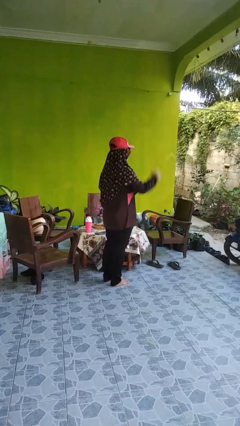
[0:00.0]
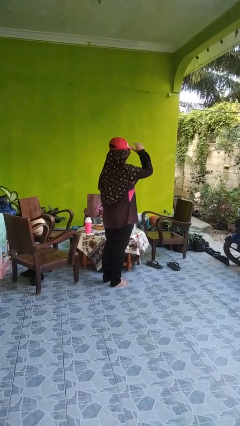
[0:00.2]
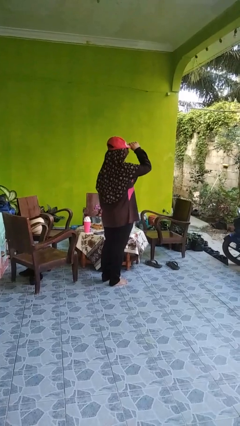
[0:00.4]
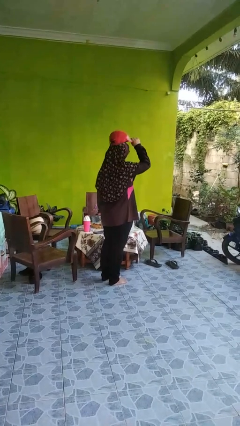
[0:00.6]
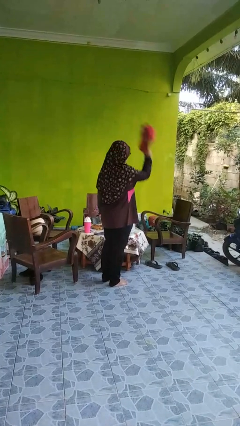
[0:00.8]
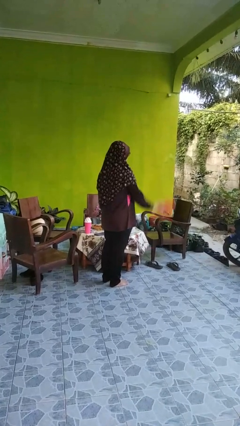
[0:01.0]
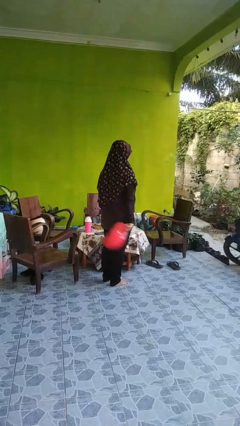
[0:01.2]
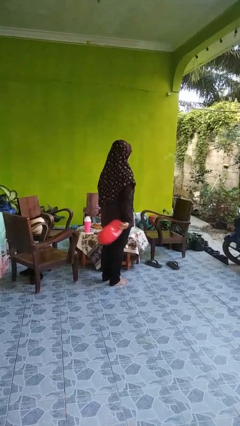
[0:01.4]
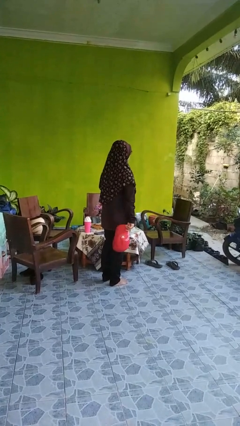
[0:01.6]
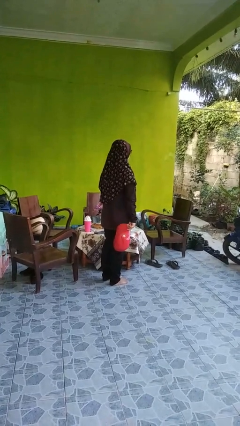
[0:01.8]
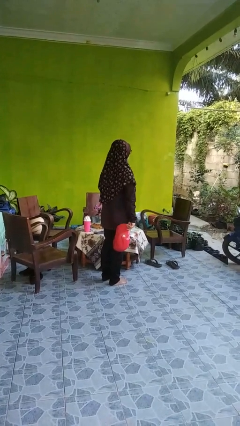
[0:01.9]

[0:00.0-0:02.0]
person takes off hat

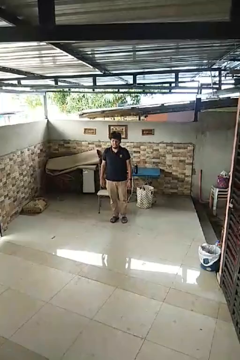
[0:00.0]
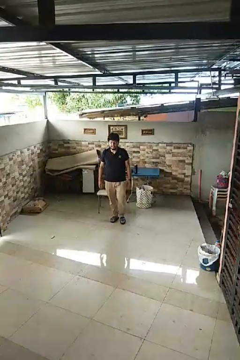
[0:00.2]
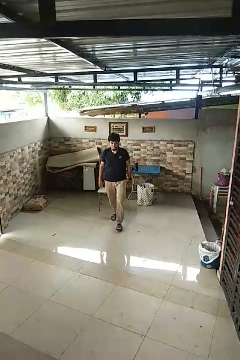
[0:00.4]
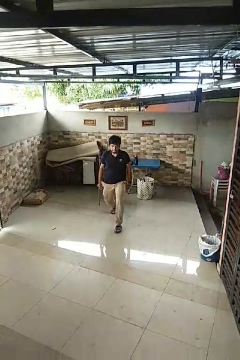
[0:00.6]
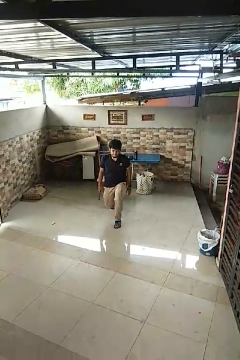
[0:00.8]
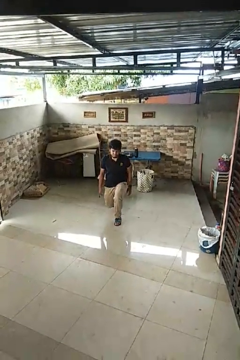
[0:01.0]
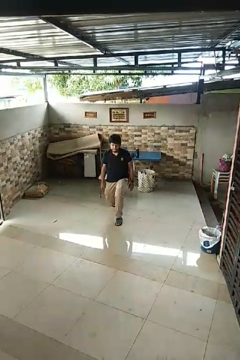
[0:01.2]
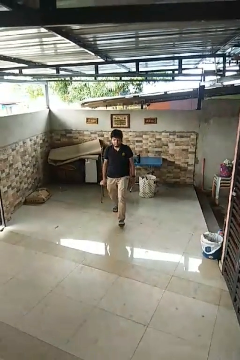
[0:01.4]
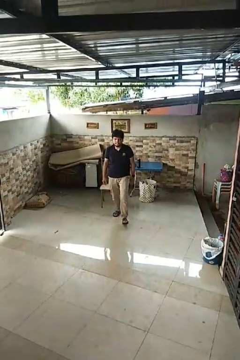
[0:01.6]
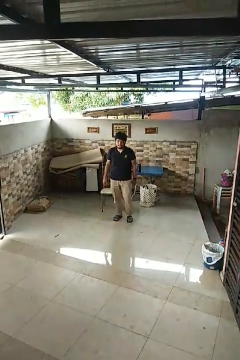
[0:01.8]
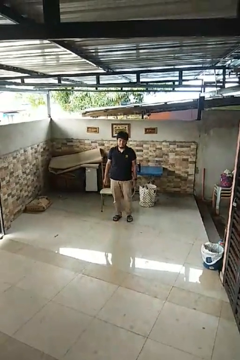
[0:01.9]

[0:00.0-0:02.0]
person exercises with lunges

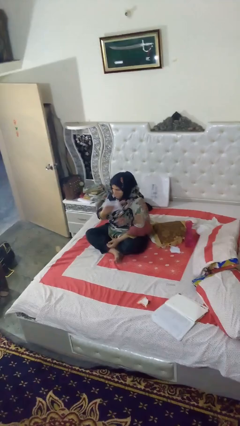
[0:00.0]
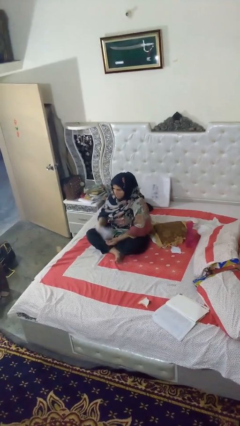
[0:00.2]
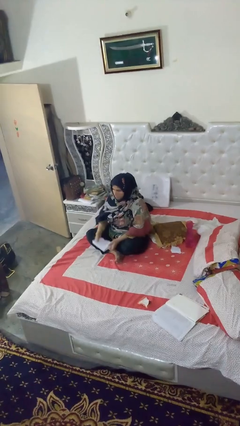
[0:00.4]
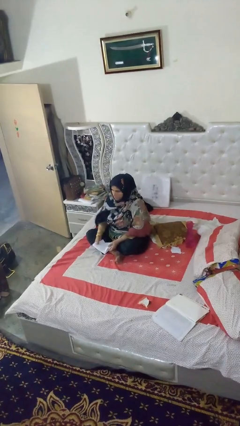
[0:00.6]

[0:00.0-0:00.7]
person wipes mouth with napkin

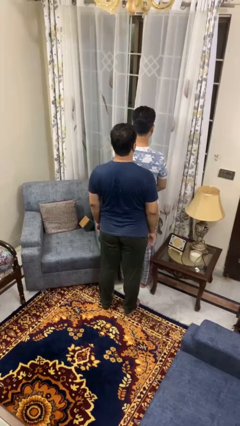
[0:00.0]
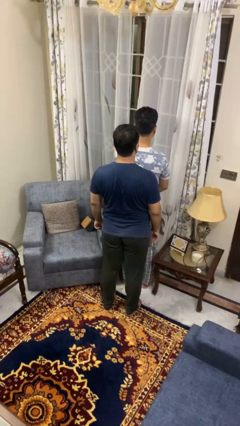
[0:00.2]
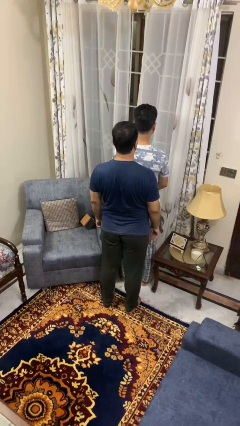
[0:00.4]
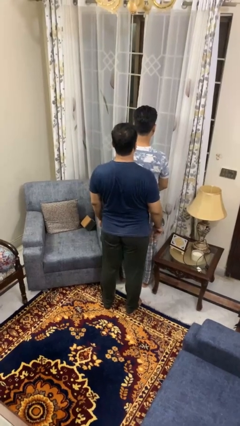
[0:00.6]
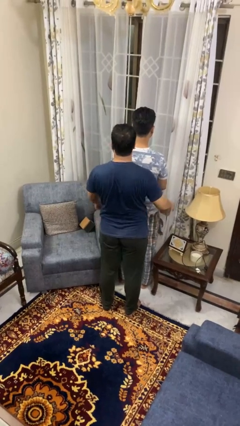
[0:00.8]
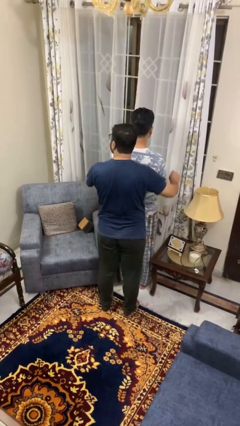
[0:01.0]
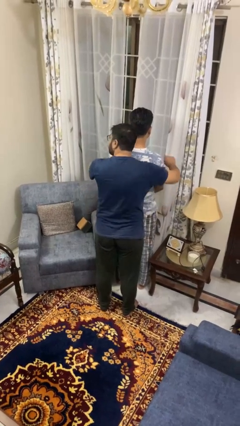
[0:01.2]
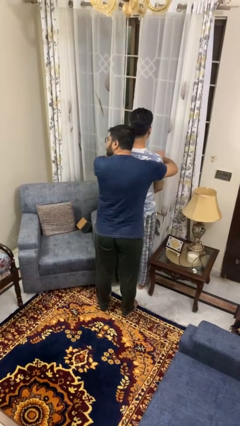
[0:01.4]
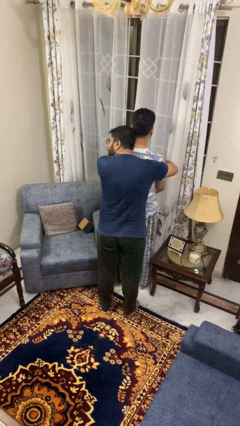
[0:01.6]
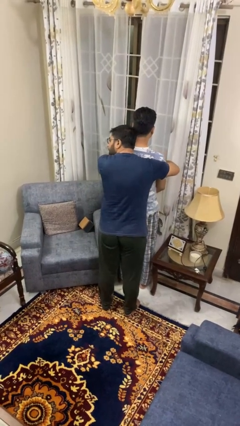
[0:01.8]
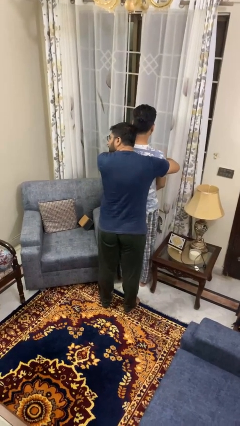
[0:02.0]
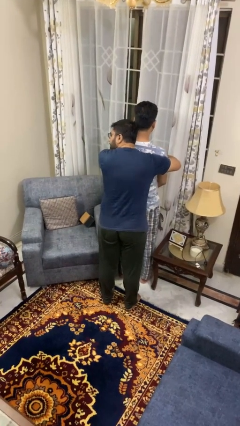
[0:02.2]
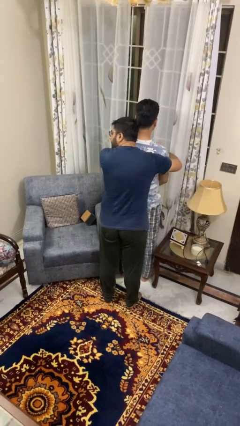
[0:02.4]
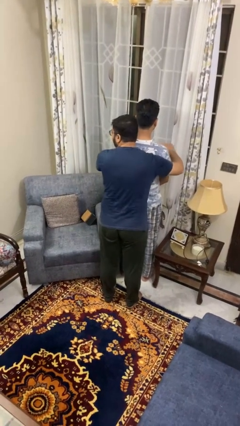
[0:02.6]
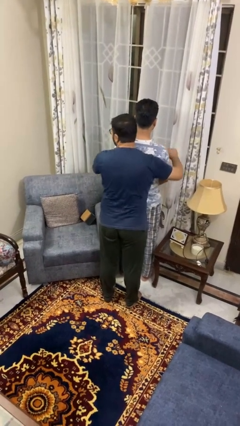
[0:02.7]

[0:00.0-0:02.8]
person hugs person from behind

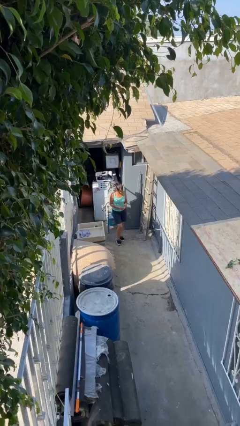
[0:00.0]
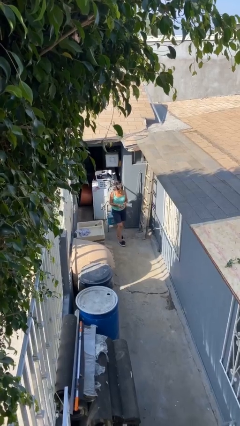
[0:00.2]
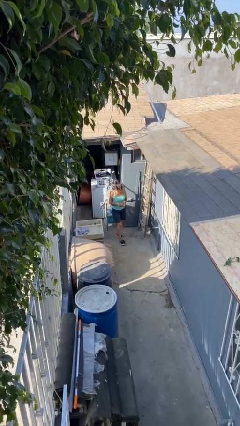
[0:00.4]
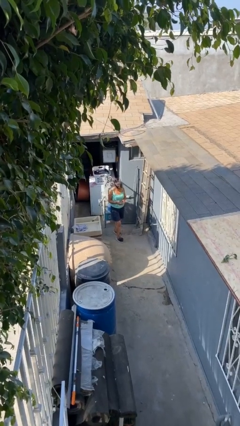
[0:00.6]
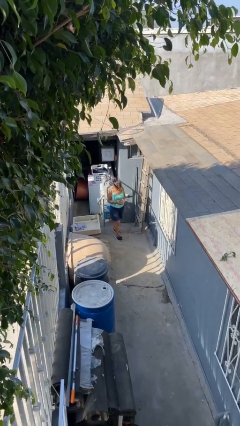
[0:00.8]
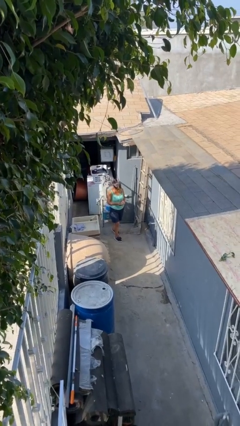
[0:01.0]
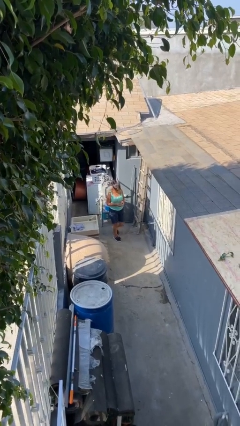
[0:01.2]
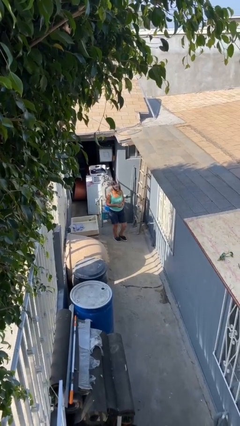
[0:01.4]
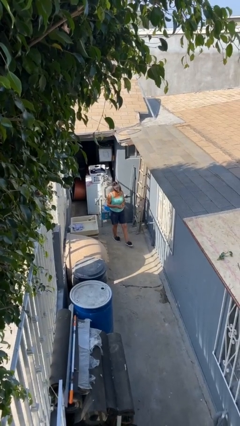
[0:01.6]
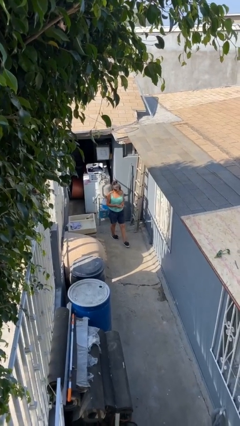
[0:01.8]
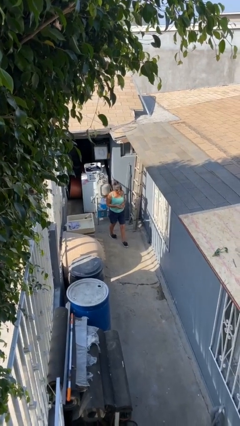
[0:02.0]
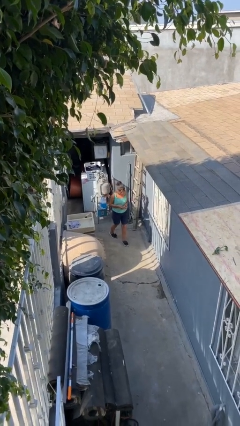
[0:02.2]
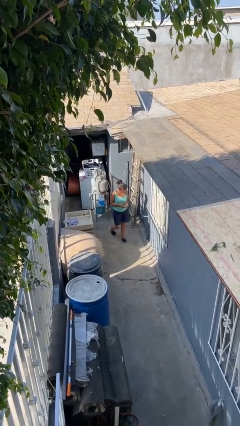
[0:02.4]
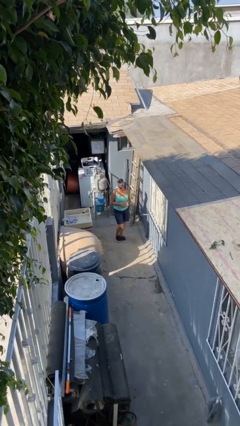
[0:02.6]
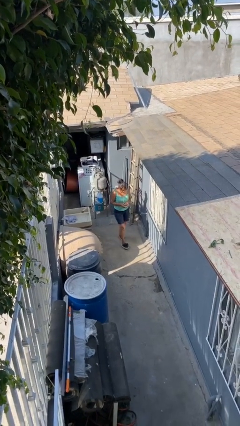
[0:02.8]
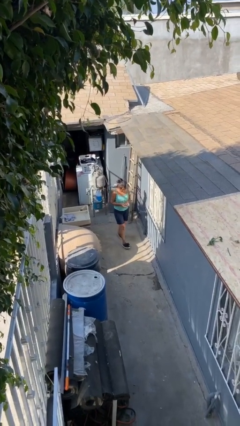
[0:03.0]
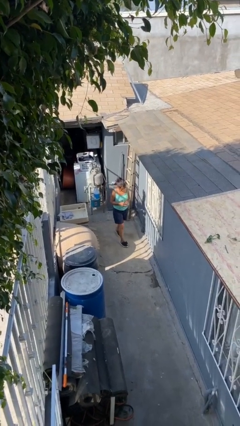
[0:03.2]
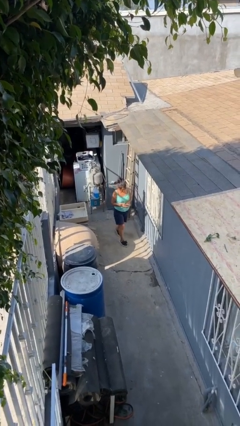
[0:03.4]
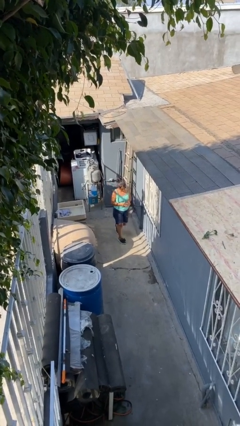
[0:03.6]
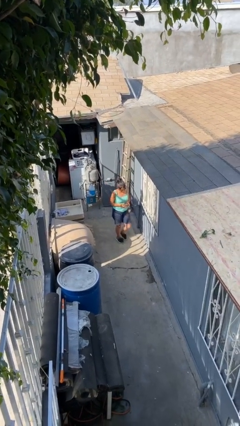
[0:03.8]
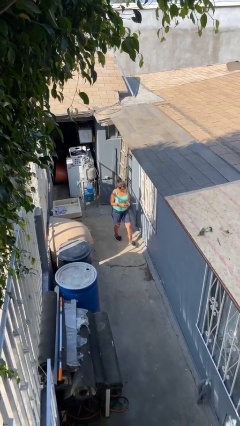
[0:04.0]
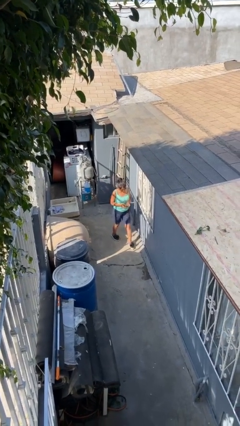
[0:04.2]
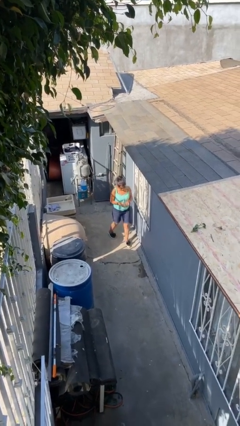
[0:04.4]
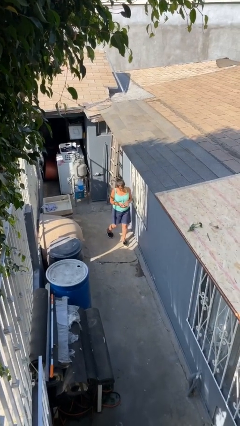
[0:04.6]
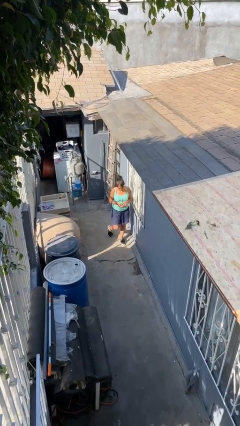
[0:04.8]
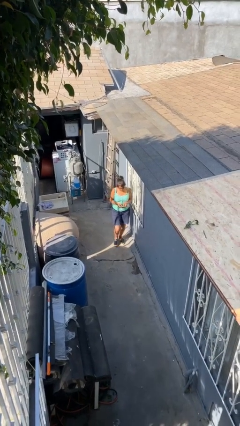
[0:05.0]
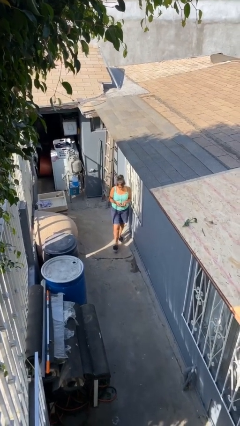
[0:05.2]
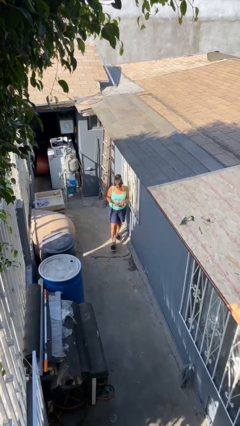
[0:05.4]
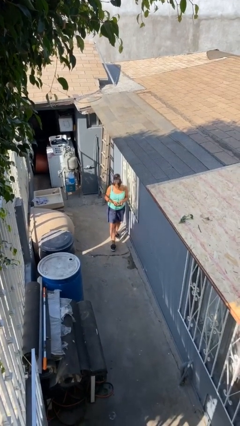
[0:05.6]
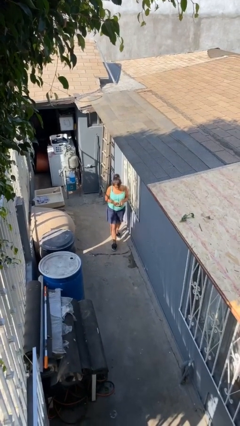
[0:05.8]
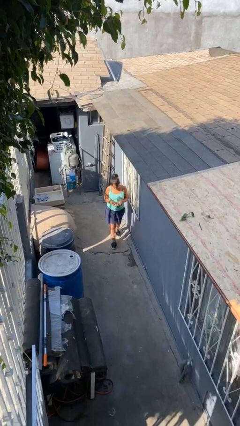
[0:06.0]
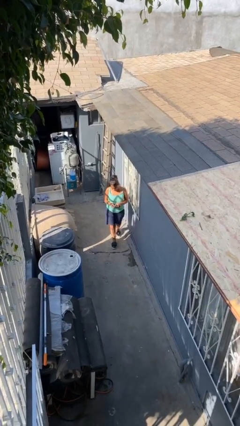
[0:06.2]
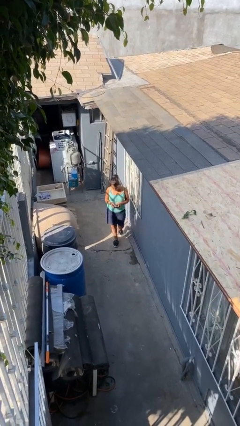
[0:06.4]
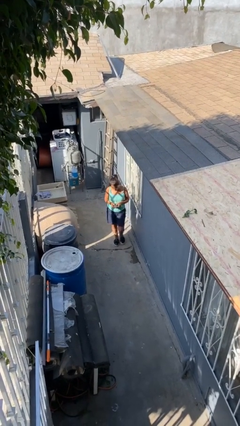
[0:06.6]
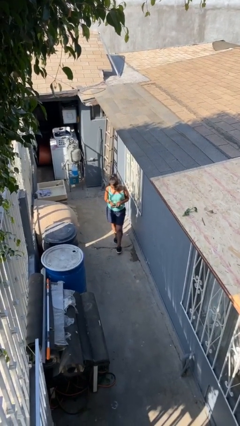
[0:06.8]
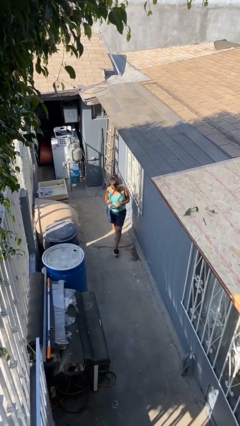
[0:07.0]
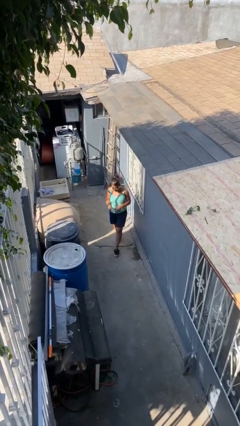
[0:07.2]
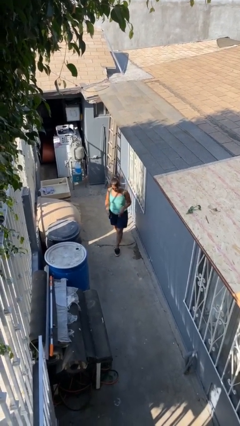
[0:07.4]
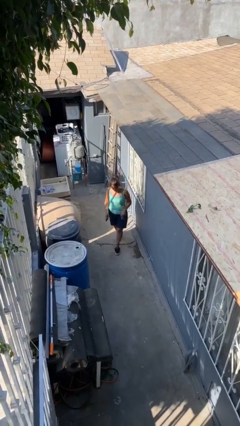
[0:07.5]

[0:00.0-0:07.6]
person texts on phone

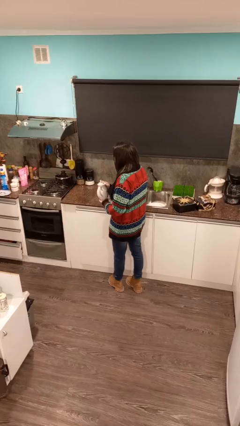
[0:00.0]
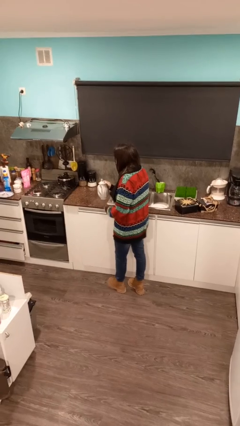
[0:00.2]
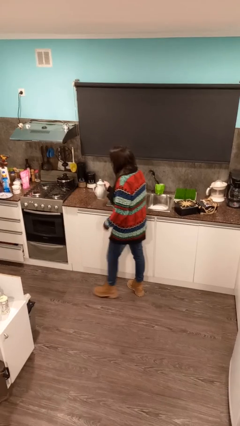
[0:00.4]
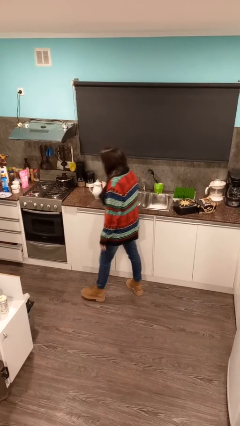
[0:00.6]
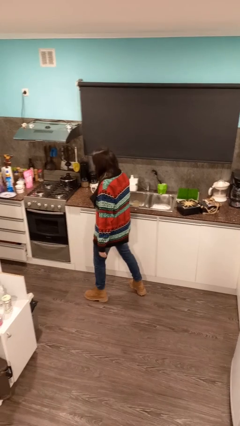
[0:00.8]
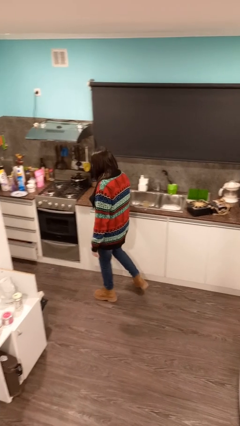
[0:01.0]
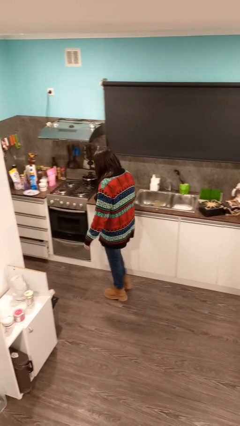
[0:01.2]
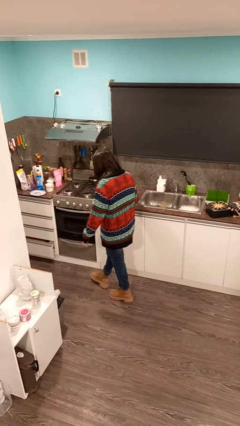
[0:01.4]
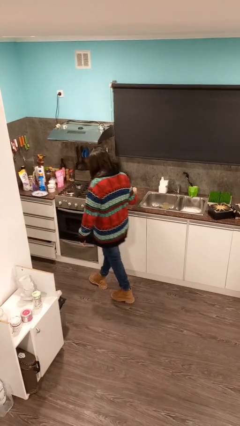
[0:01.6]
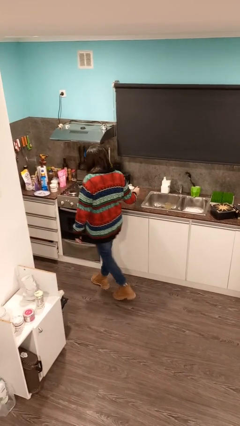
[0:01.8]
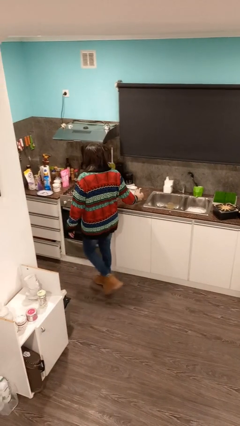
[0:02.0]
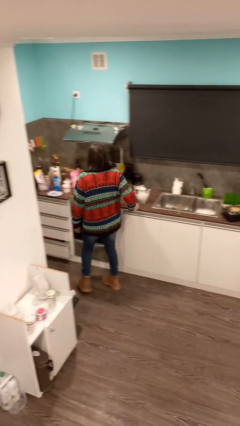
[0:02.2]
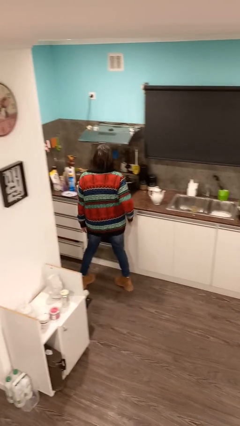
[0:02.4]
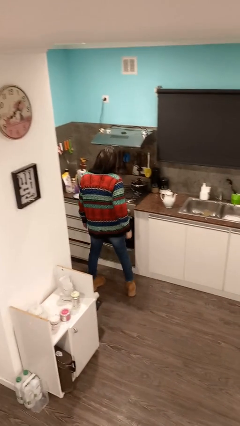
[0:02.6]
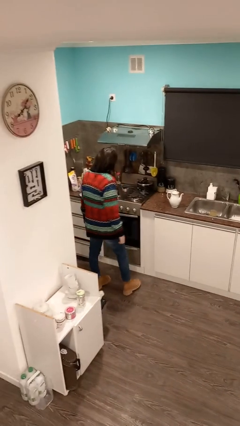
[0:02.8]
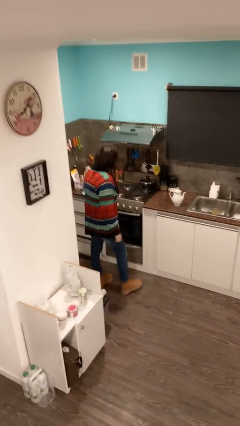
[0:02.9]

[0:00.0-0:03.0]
person puts down object on countertop

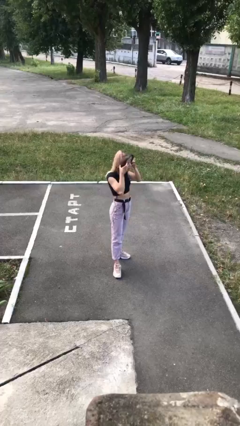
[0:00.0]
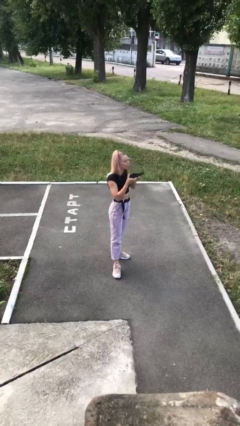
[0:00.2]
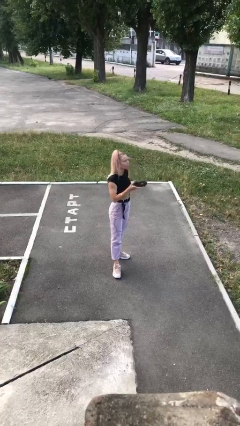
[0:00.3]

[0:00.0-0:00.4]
person takes off headphones
